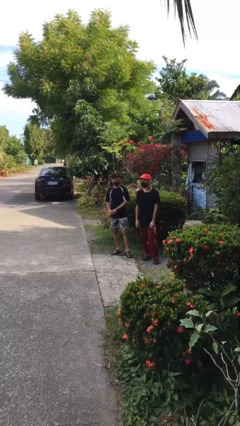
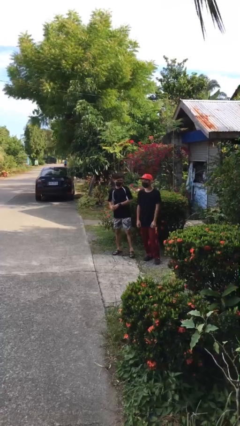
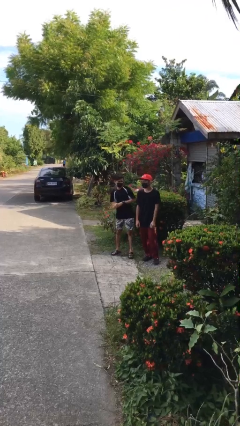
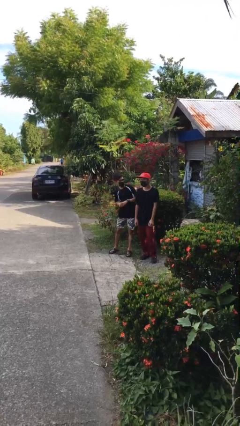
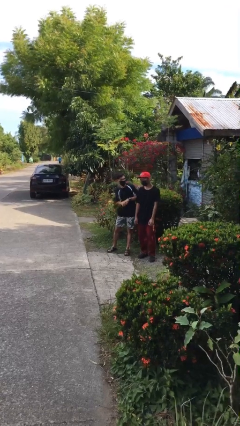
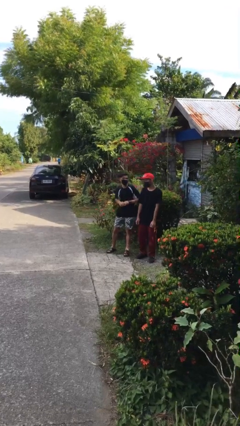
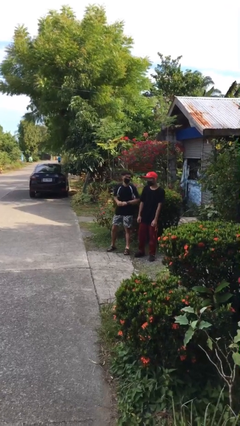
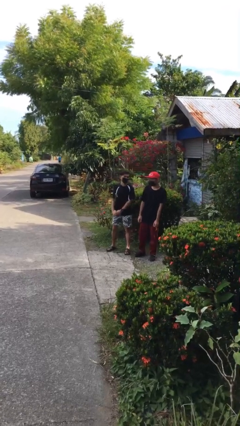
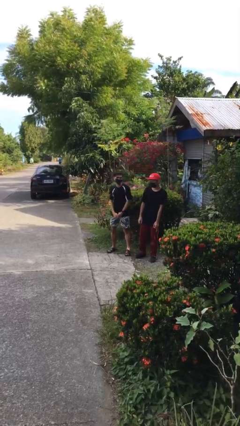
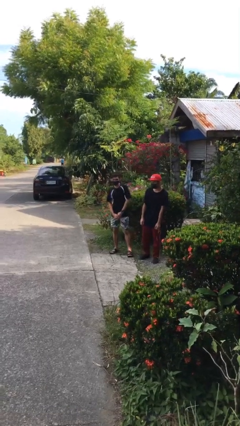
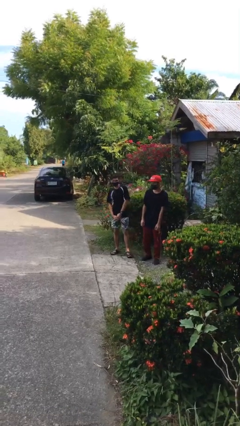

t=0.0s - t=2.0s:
person nudges person with elbow

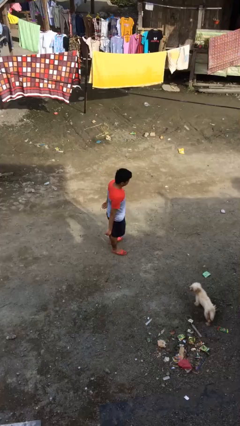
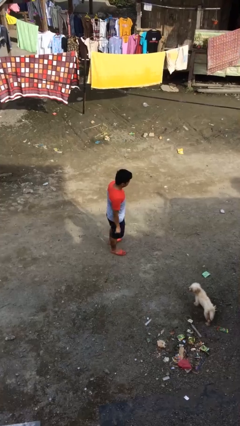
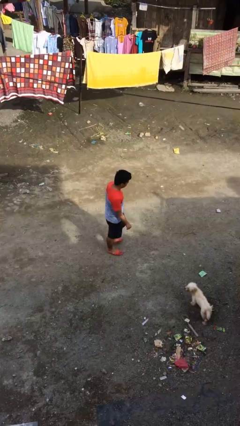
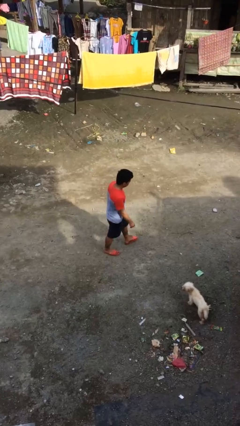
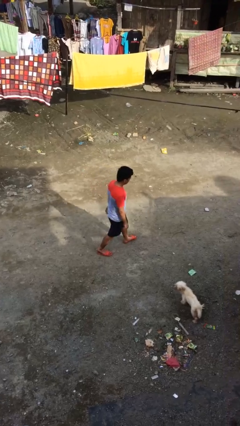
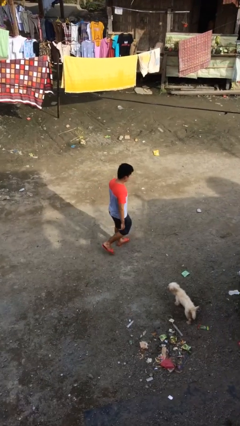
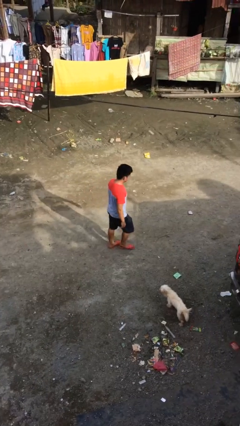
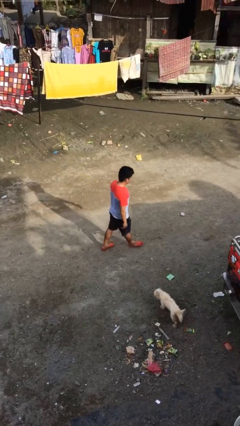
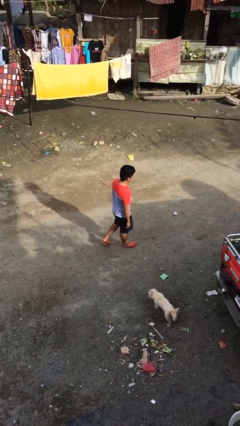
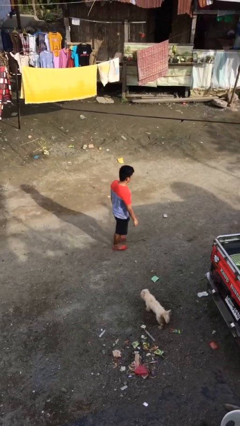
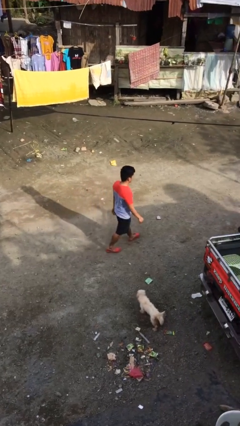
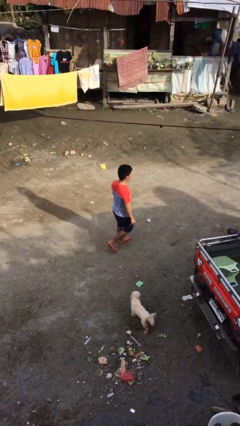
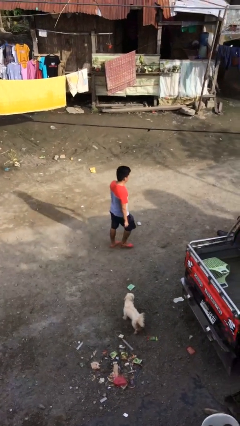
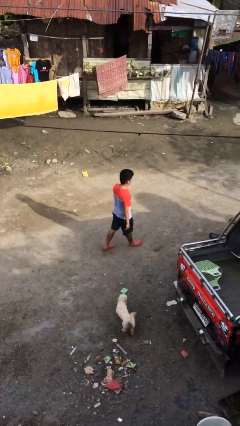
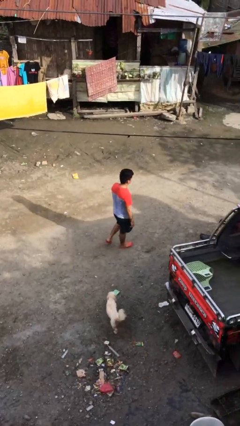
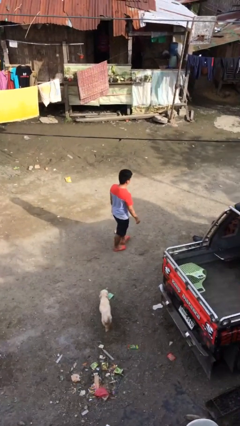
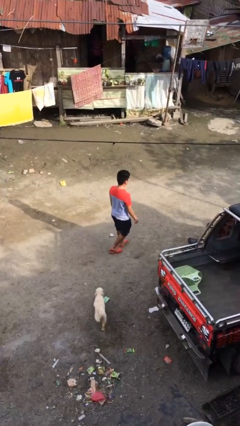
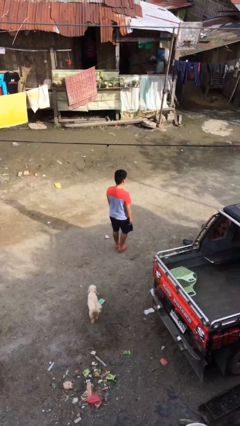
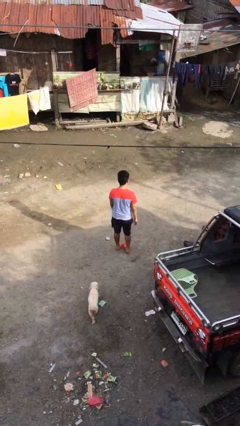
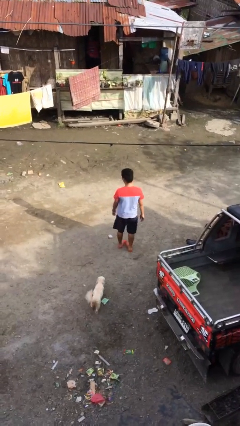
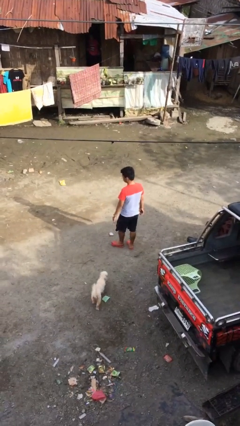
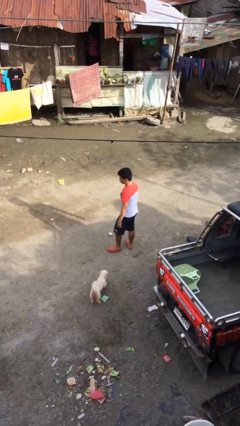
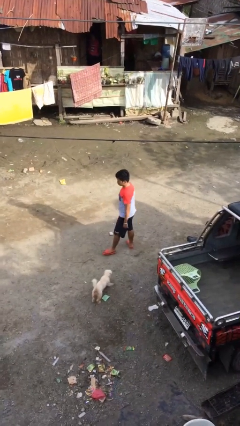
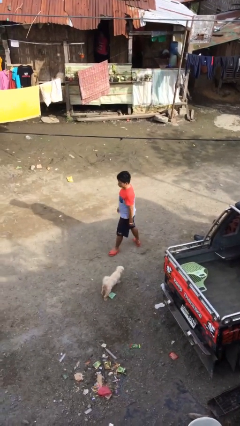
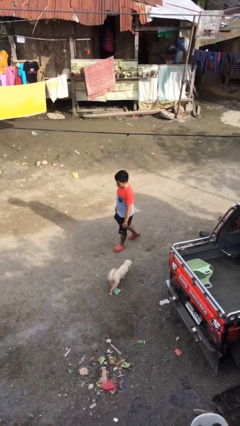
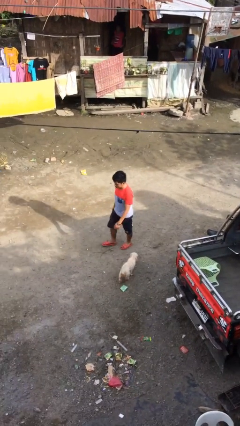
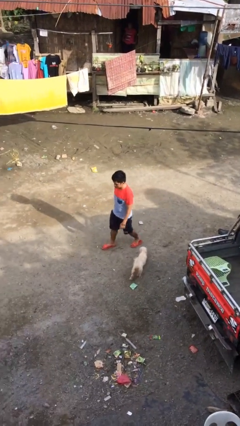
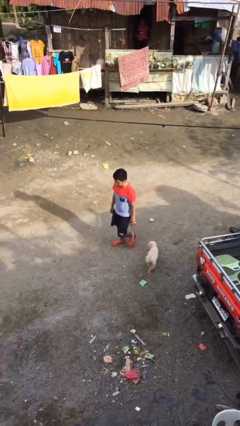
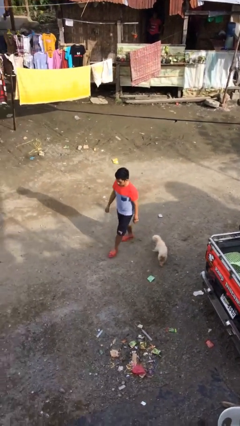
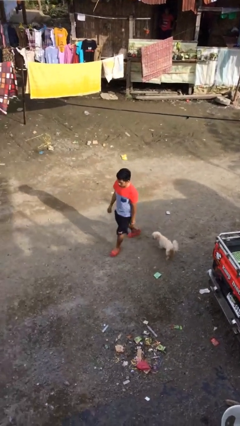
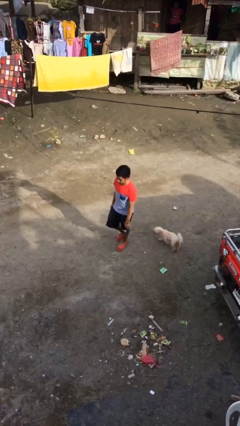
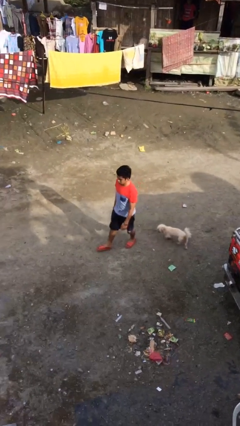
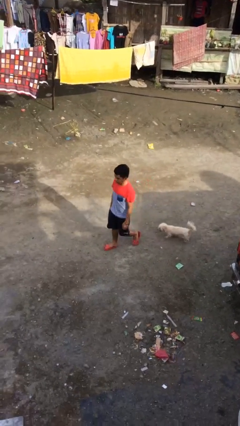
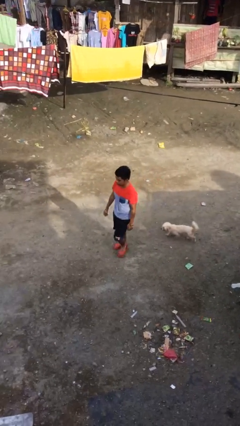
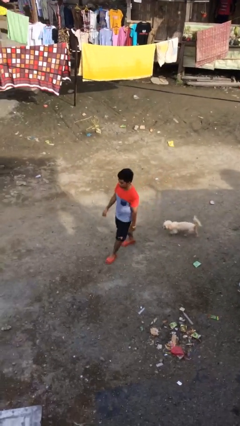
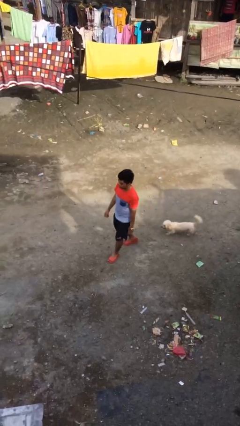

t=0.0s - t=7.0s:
person walks

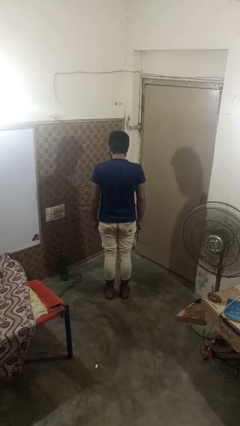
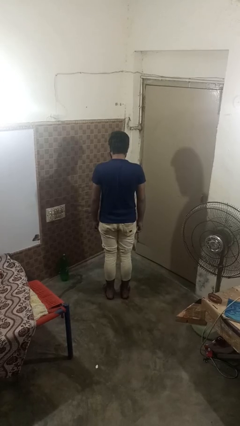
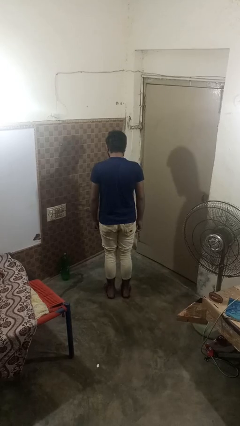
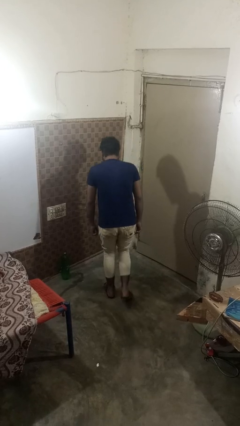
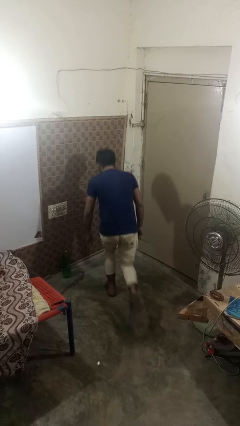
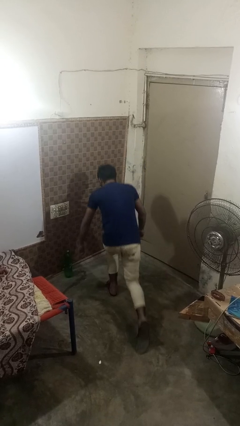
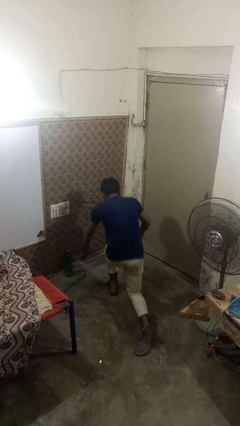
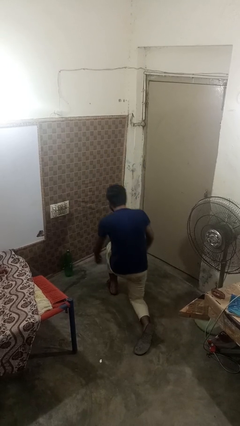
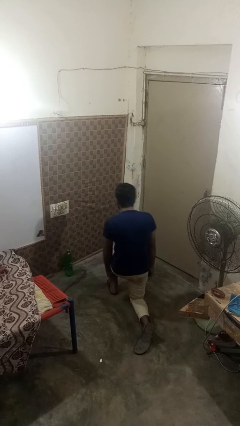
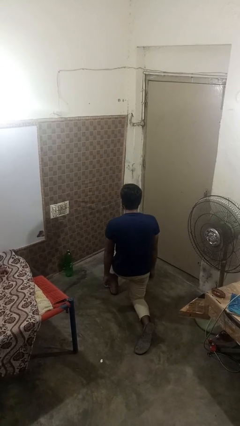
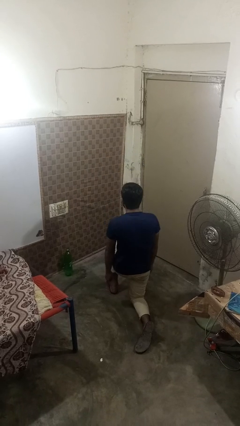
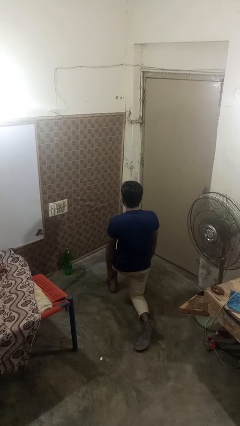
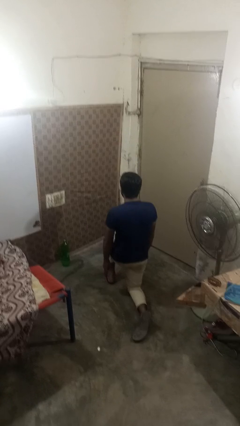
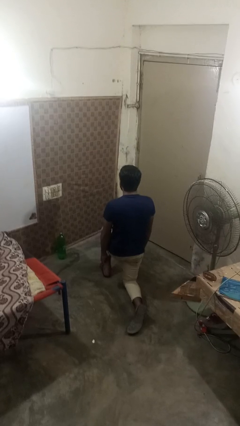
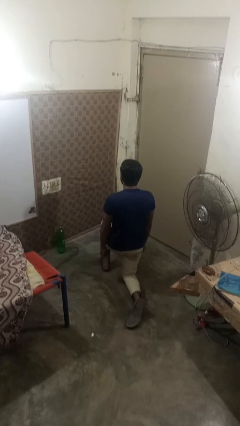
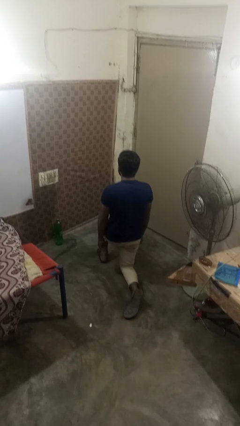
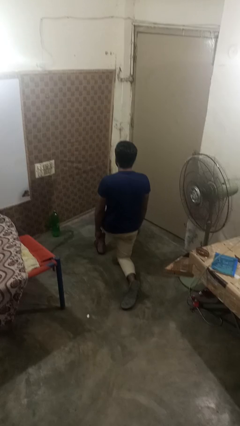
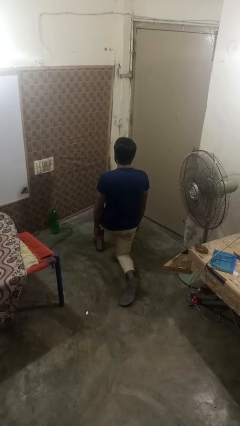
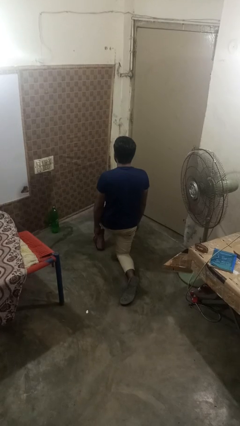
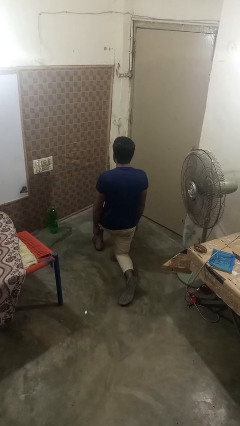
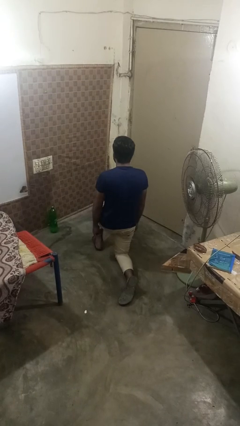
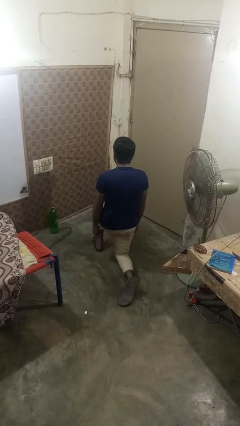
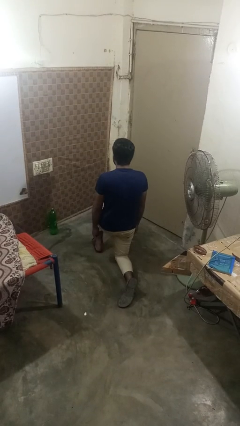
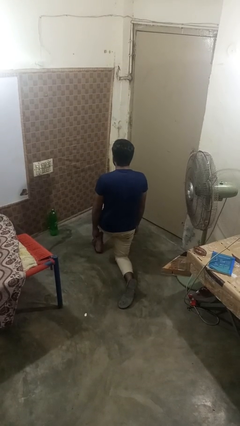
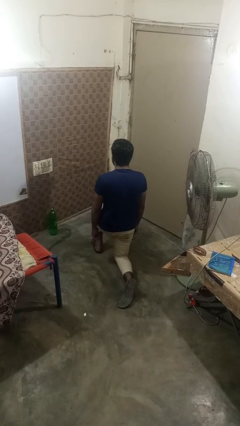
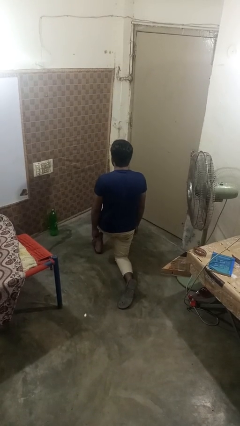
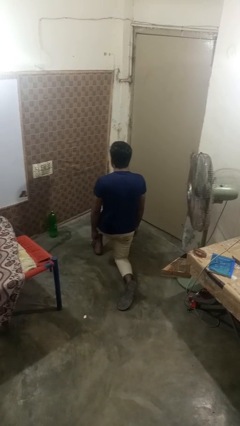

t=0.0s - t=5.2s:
person kneels

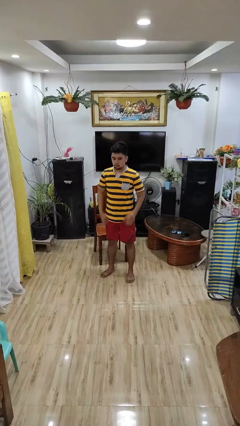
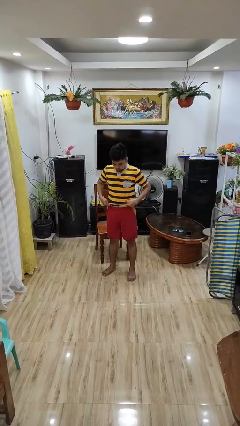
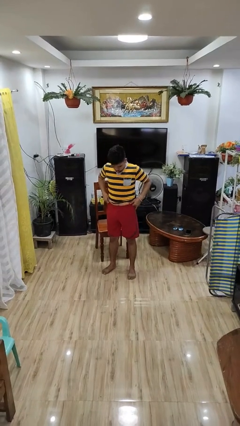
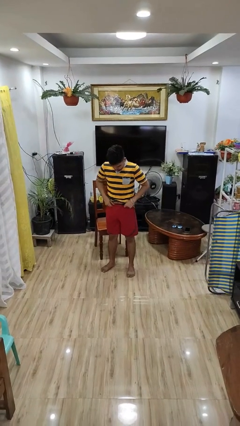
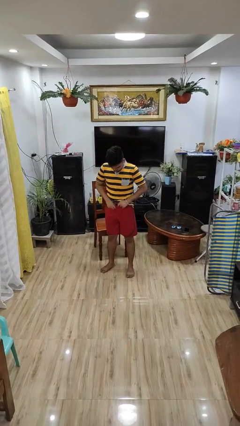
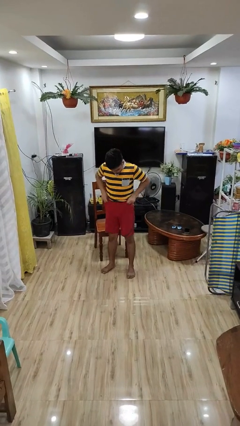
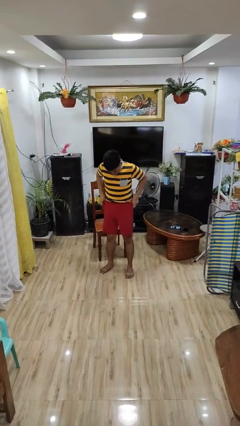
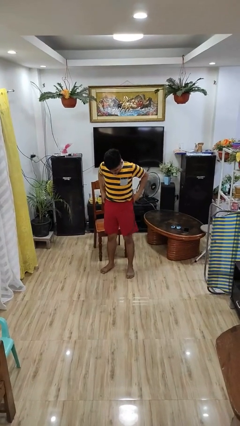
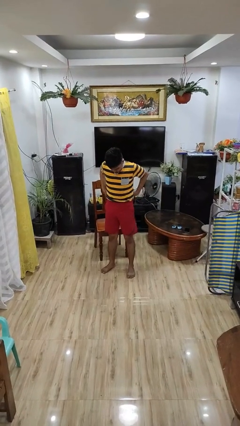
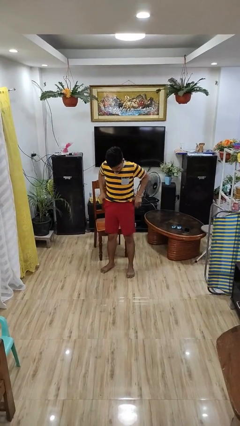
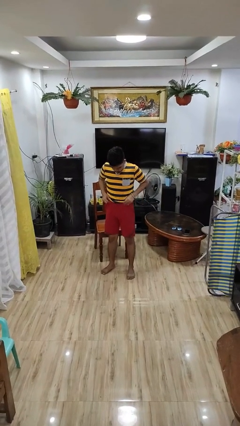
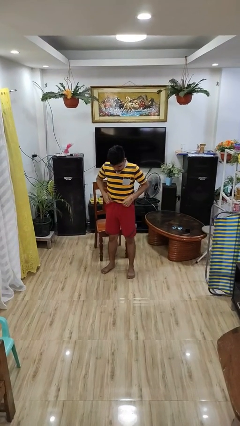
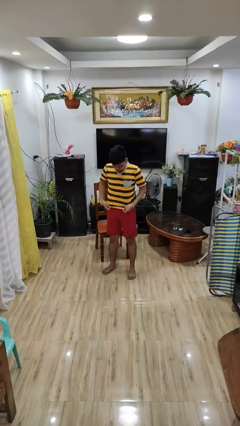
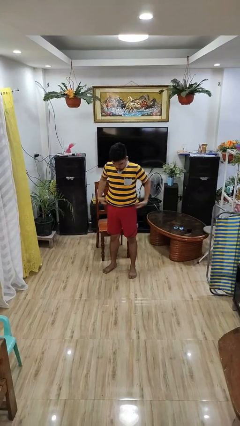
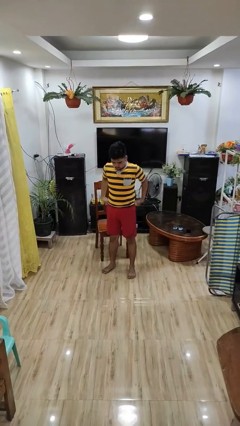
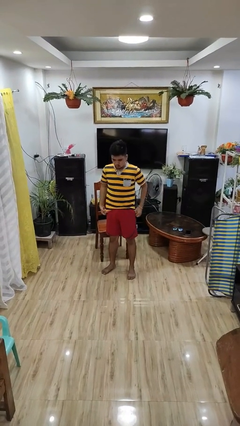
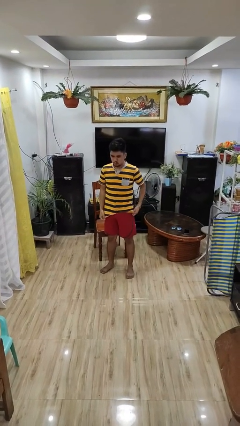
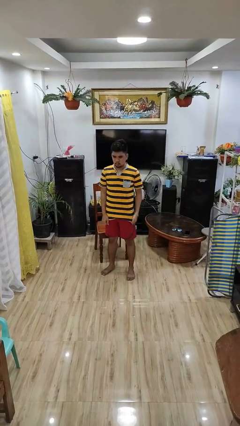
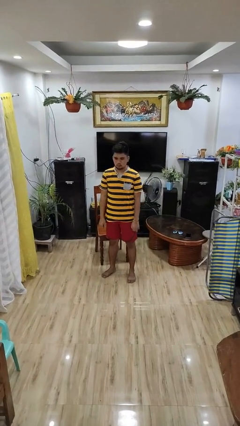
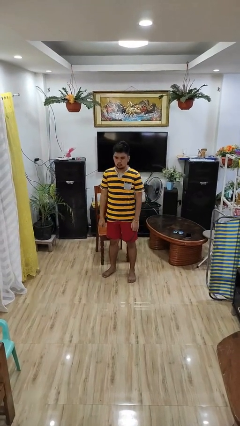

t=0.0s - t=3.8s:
person hikes up pants
